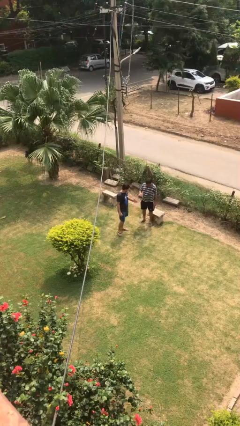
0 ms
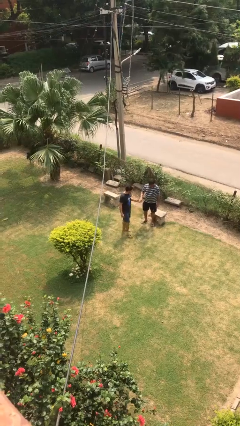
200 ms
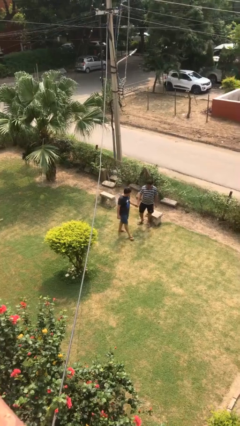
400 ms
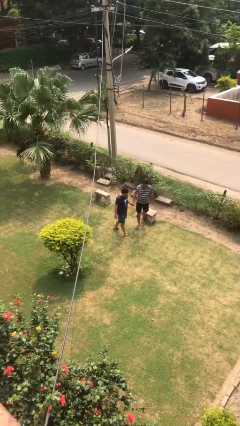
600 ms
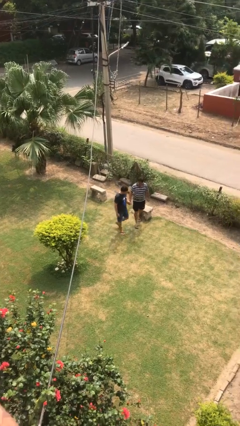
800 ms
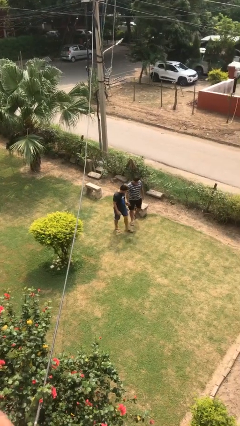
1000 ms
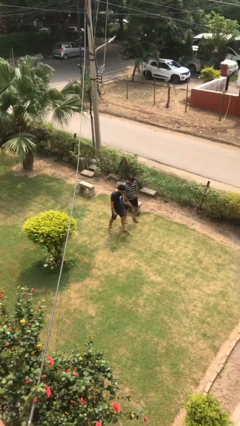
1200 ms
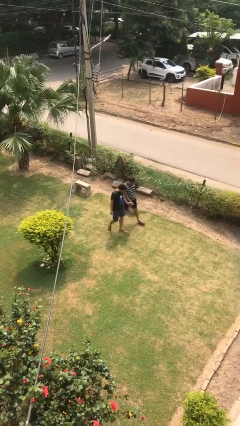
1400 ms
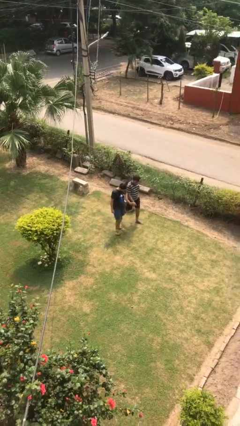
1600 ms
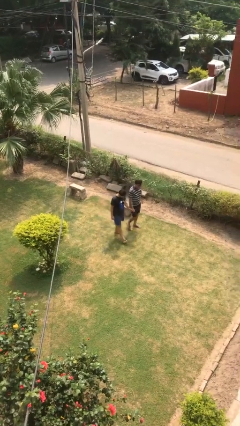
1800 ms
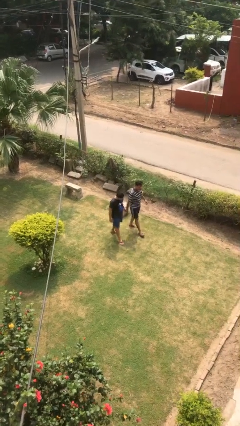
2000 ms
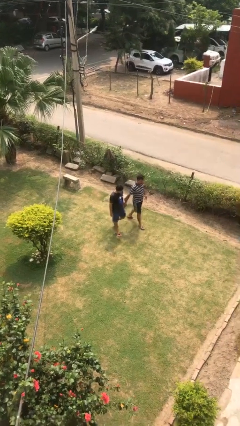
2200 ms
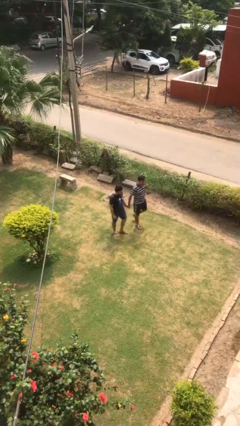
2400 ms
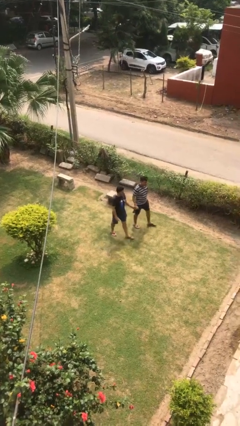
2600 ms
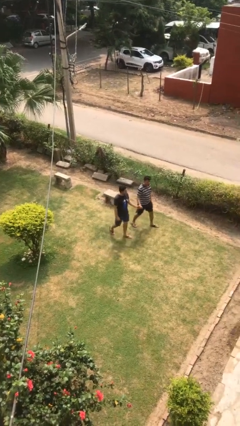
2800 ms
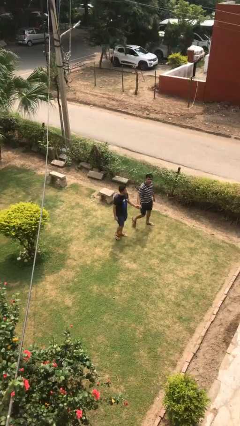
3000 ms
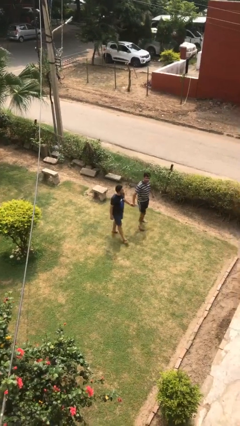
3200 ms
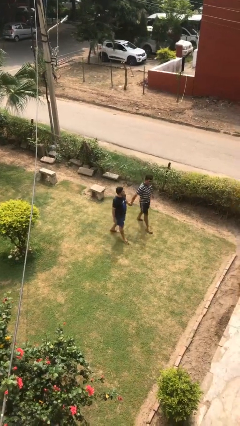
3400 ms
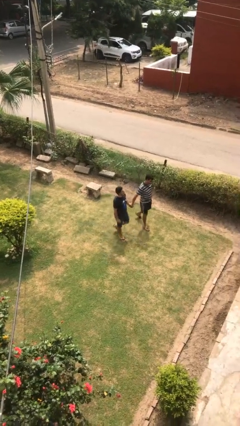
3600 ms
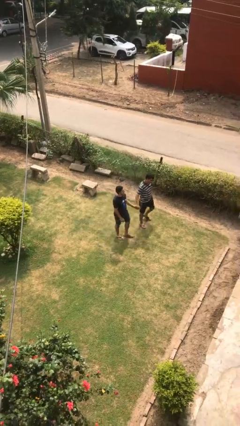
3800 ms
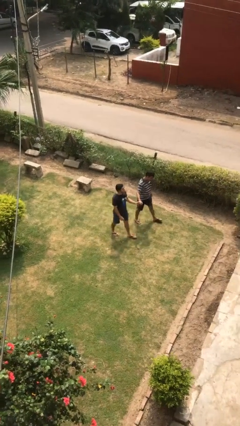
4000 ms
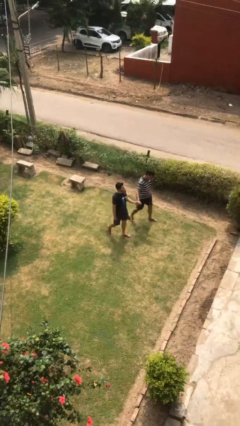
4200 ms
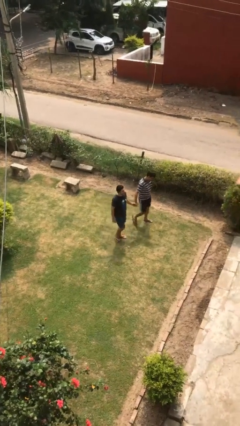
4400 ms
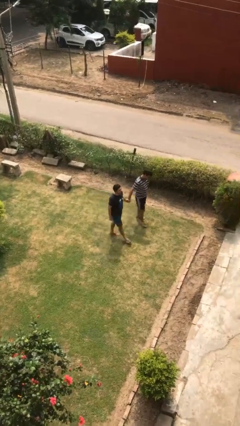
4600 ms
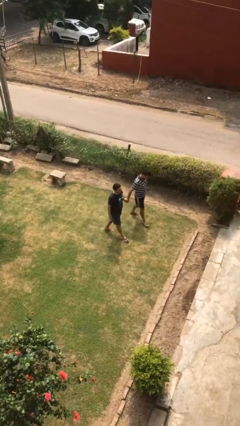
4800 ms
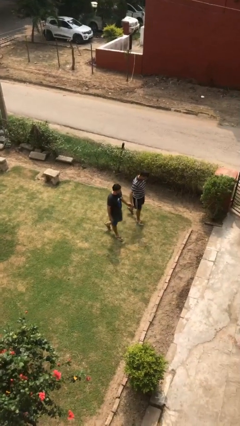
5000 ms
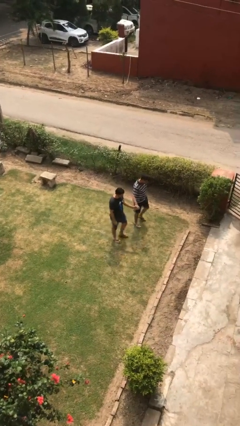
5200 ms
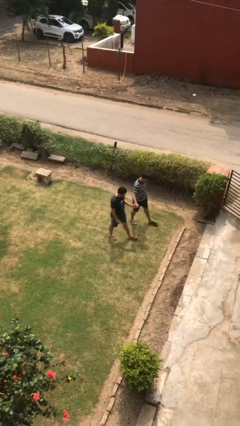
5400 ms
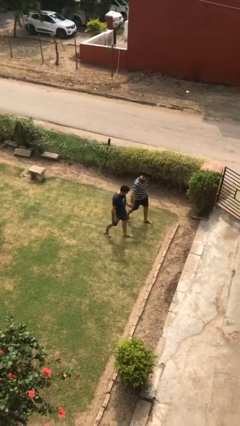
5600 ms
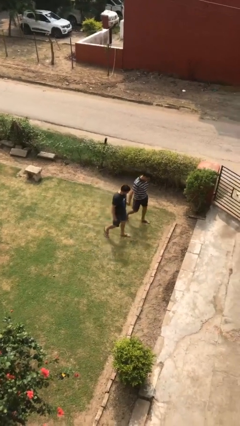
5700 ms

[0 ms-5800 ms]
person holds hand

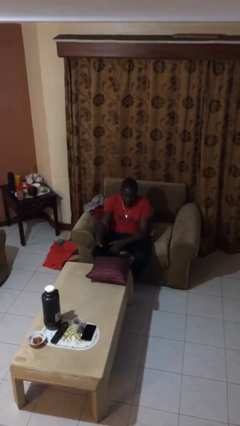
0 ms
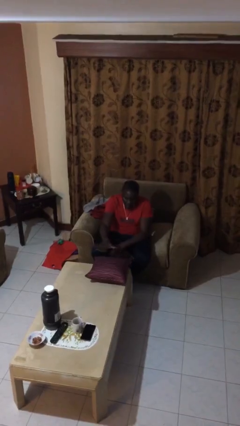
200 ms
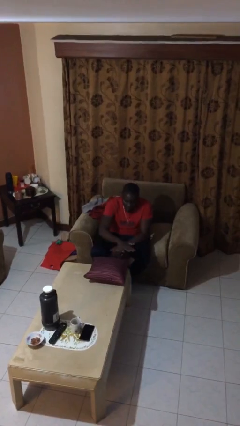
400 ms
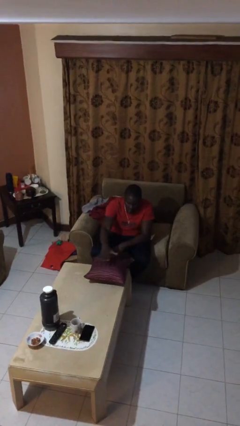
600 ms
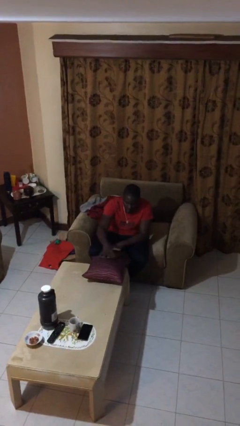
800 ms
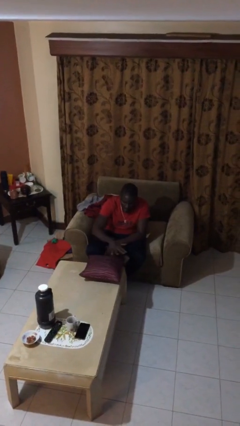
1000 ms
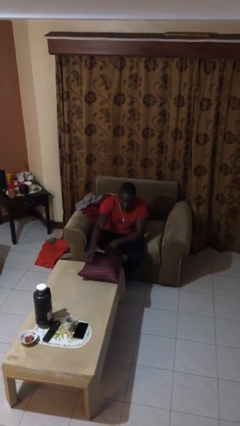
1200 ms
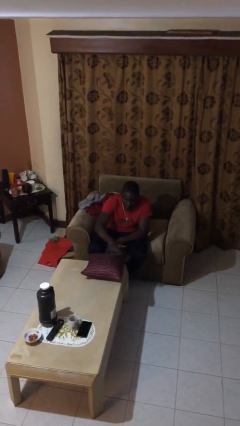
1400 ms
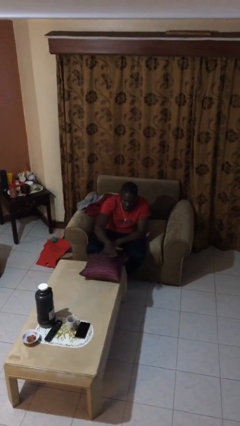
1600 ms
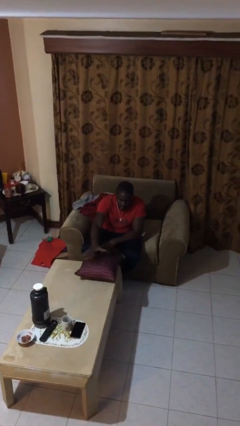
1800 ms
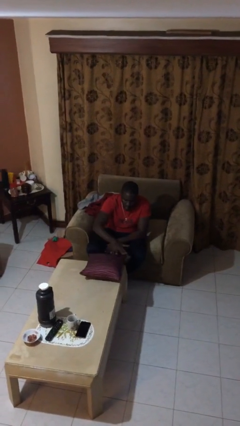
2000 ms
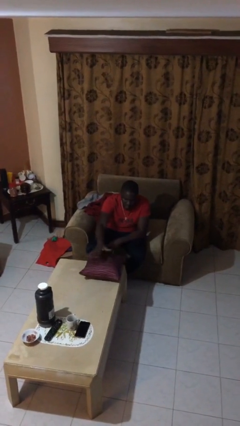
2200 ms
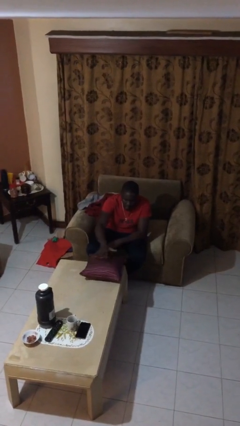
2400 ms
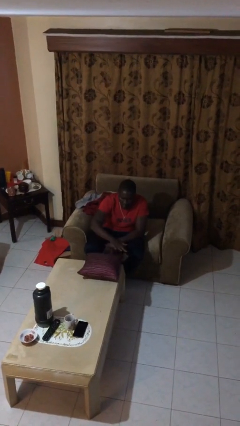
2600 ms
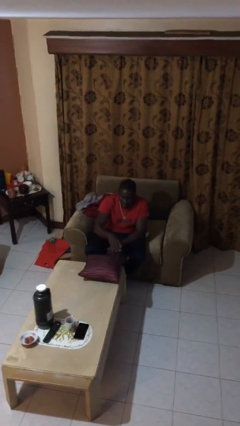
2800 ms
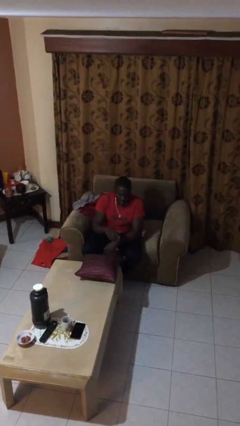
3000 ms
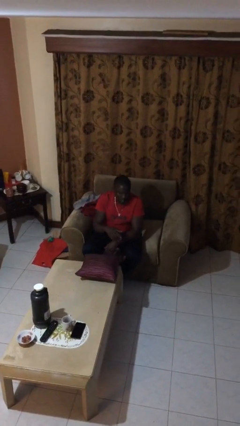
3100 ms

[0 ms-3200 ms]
person waves hand over object

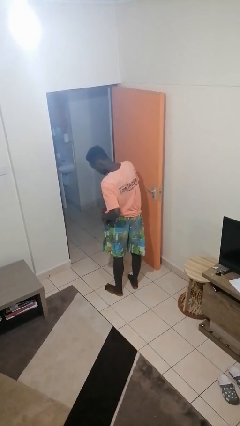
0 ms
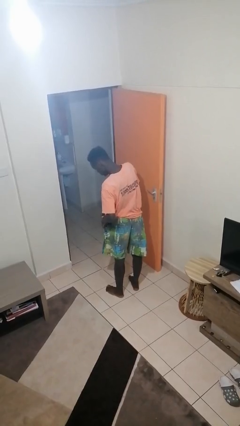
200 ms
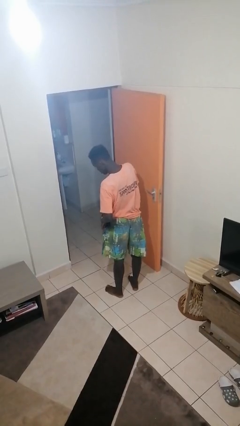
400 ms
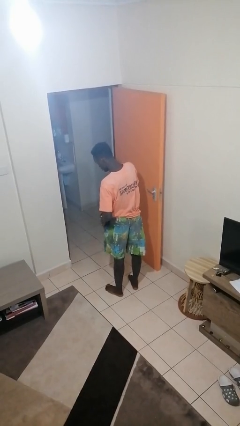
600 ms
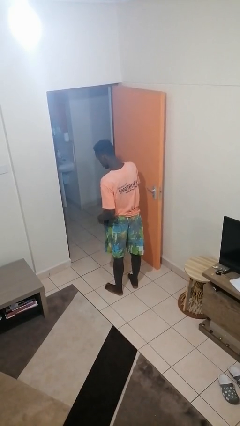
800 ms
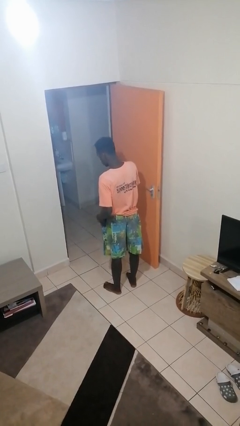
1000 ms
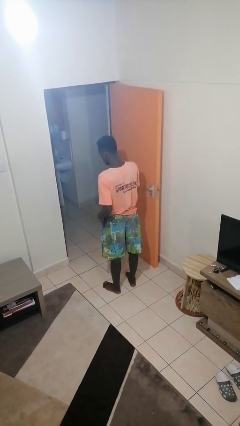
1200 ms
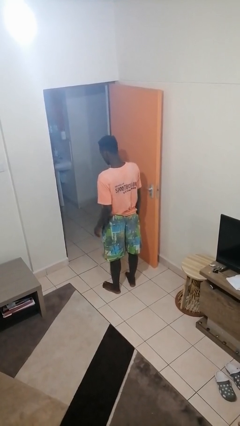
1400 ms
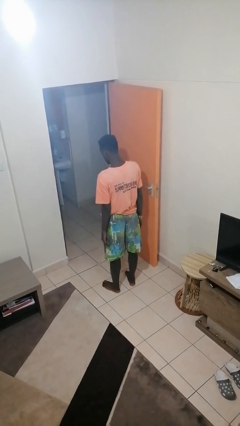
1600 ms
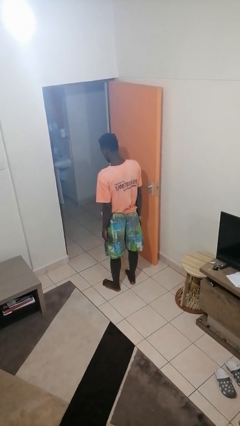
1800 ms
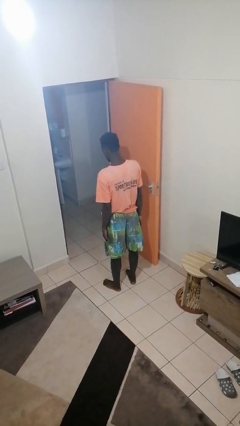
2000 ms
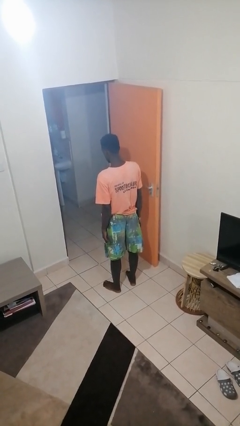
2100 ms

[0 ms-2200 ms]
person puts phone into pocket

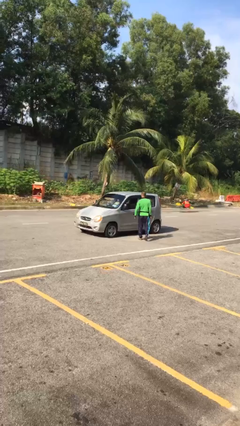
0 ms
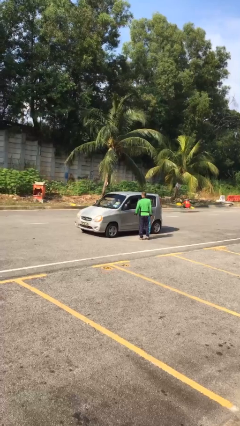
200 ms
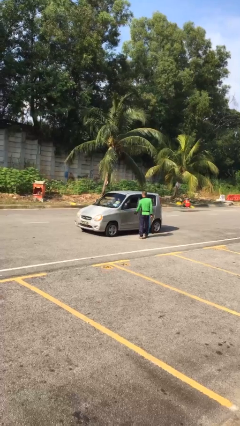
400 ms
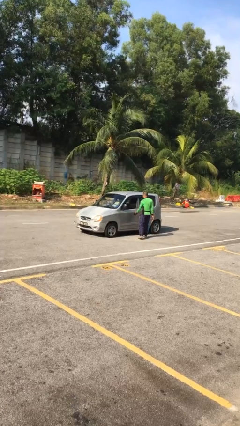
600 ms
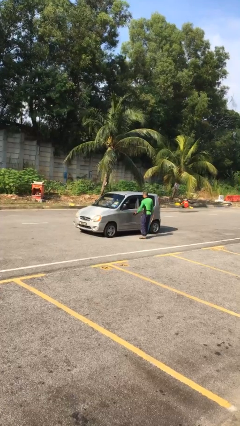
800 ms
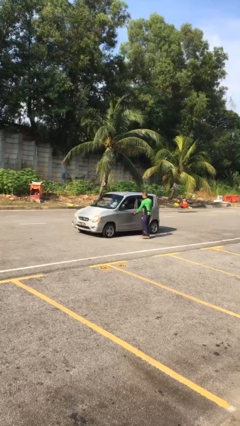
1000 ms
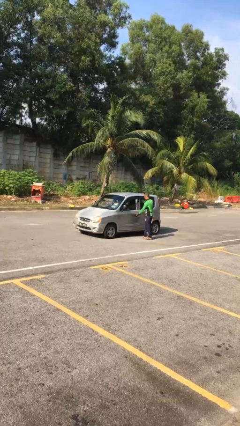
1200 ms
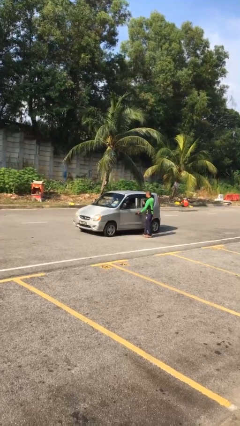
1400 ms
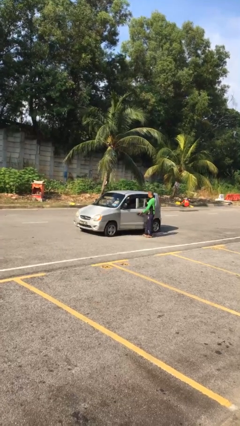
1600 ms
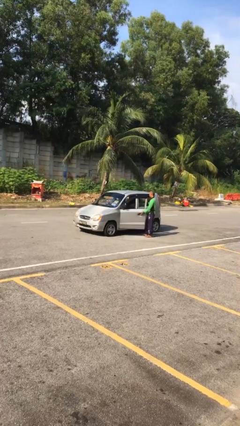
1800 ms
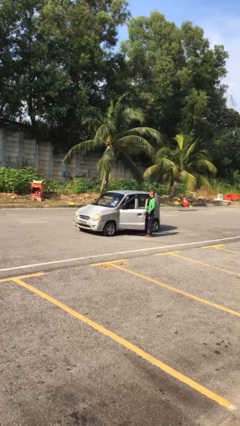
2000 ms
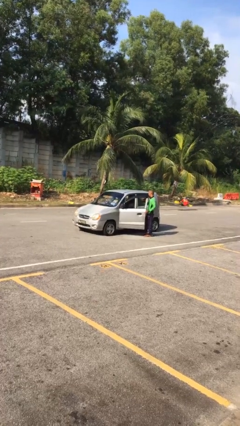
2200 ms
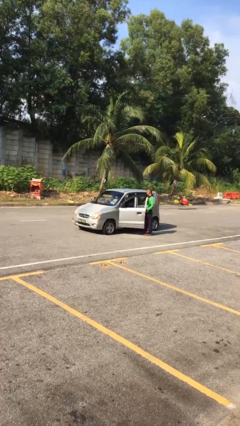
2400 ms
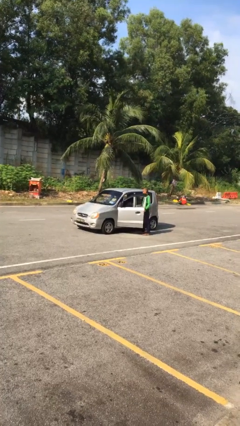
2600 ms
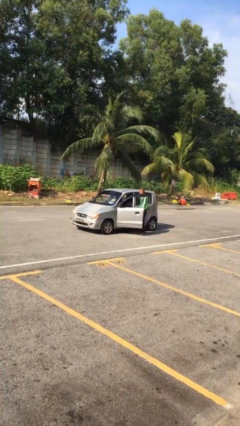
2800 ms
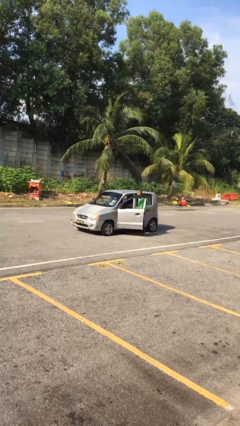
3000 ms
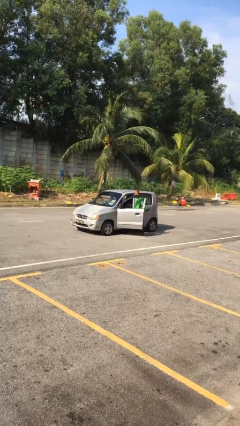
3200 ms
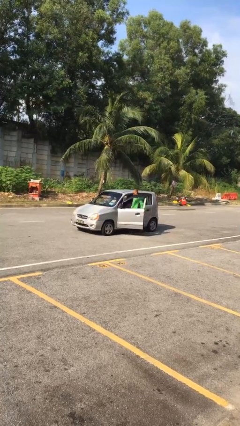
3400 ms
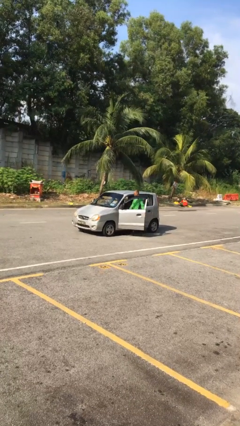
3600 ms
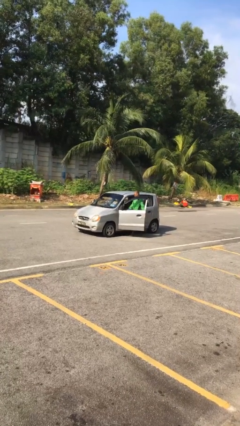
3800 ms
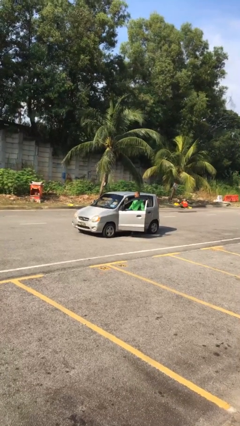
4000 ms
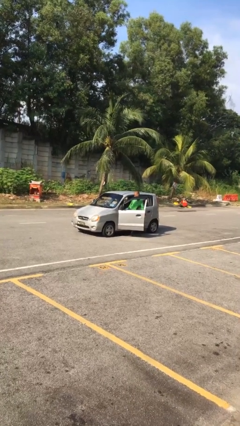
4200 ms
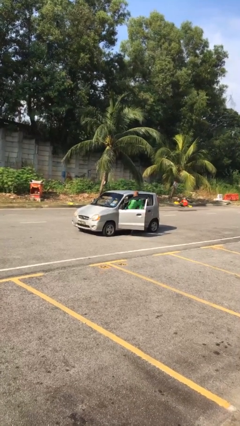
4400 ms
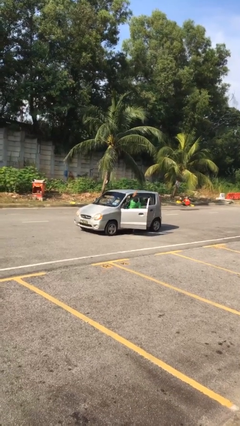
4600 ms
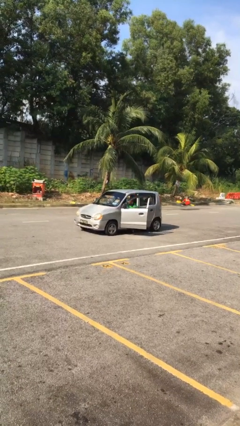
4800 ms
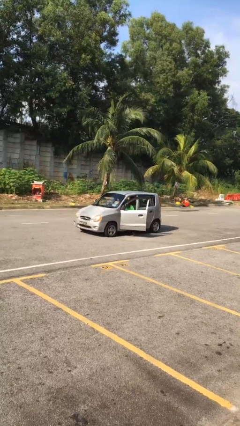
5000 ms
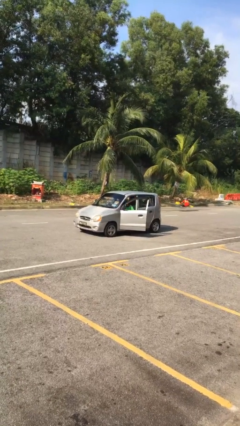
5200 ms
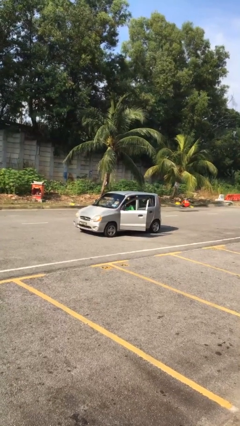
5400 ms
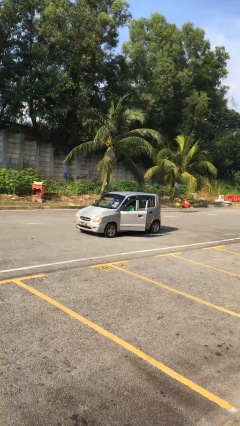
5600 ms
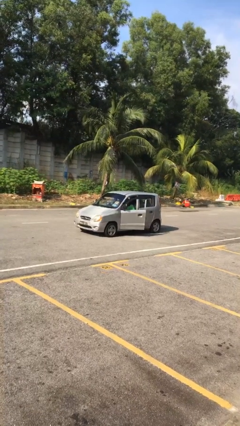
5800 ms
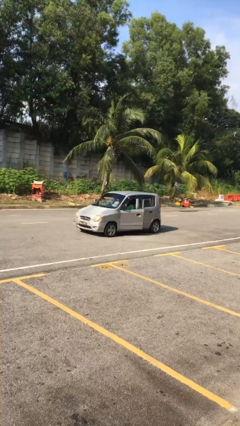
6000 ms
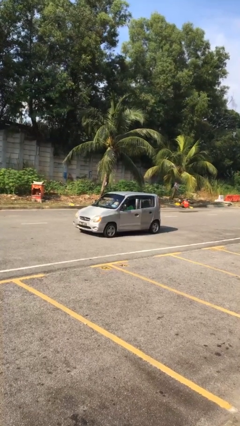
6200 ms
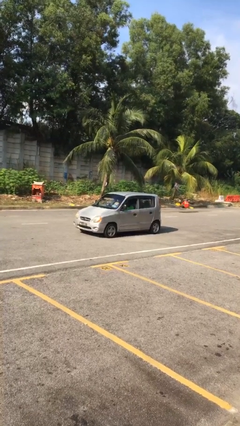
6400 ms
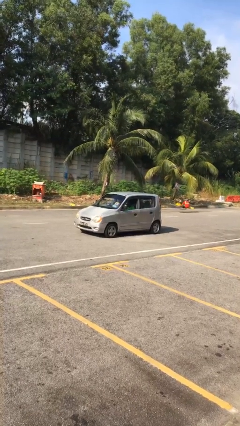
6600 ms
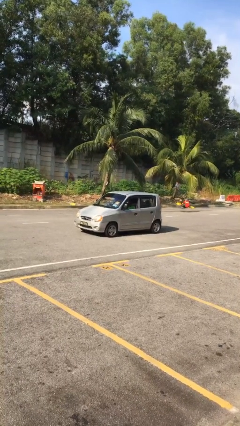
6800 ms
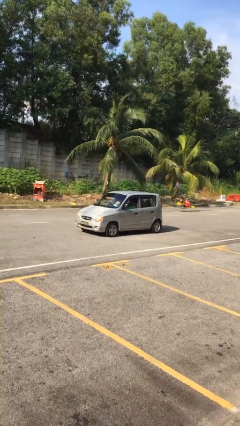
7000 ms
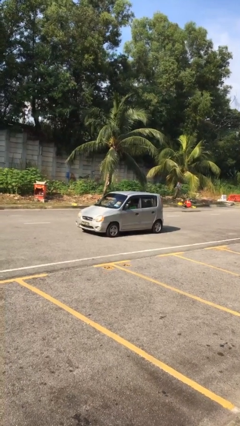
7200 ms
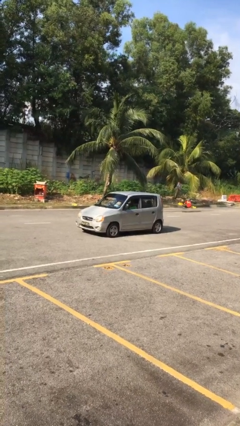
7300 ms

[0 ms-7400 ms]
car picks up person
